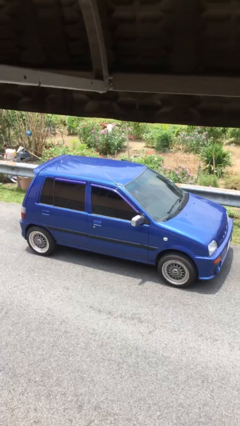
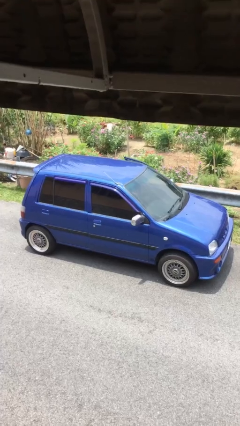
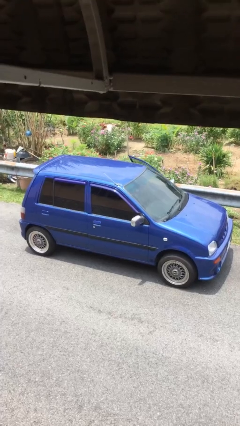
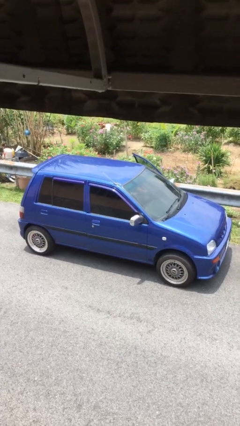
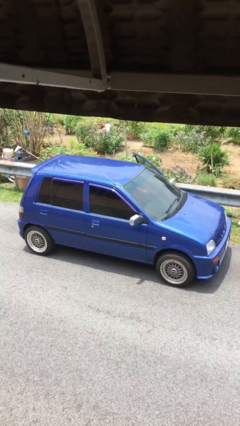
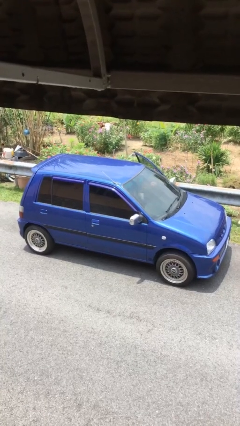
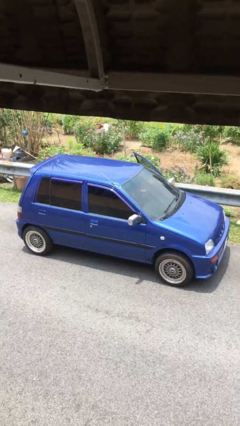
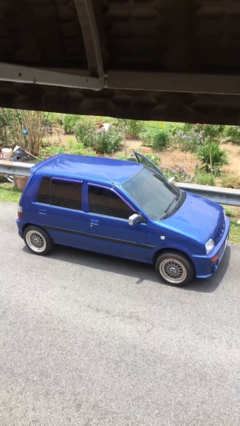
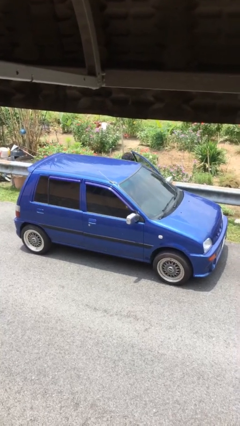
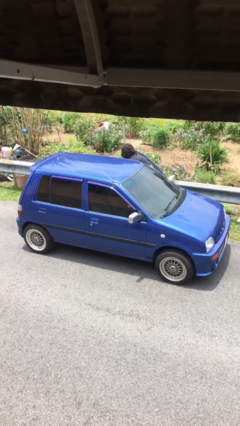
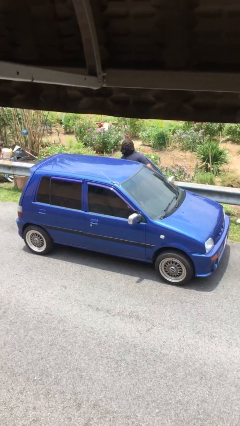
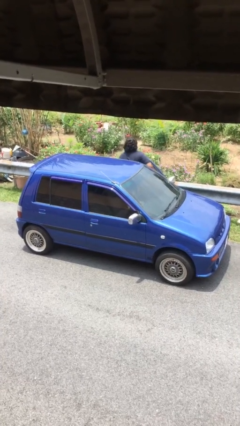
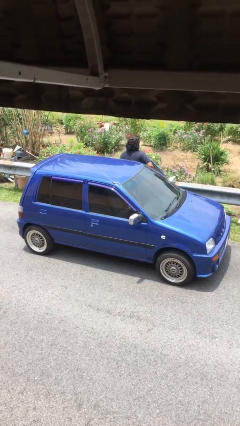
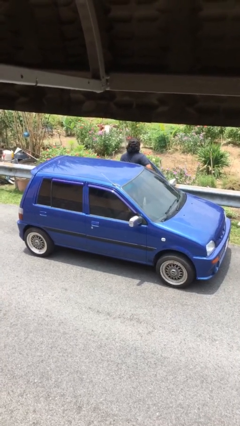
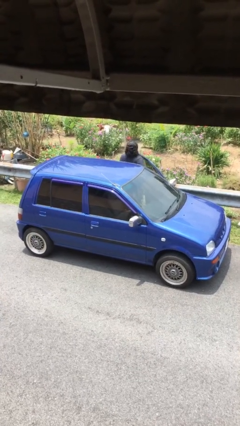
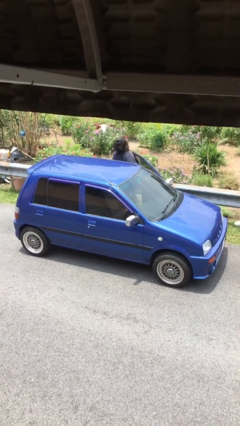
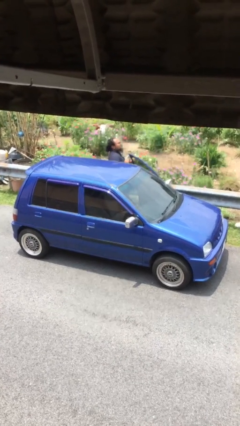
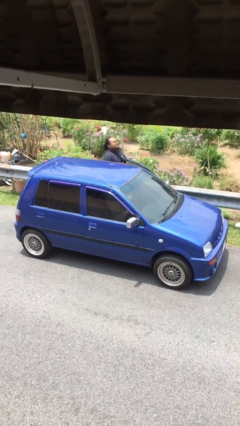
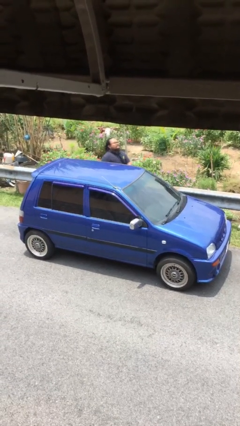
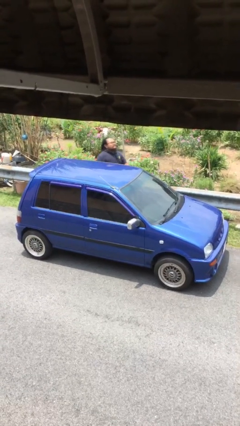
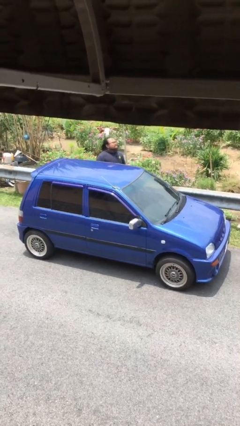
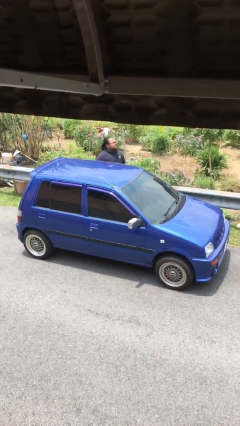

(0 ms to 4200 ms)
car drops off person

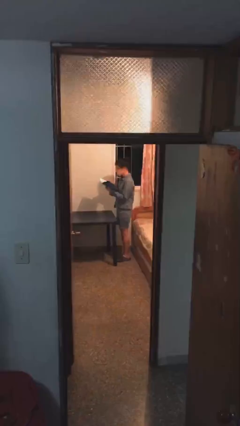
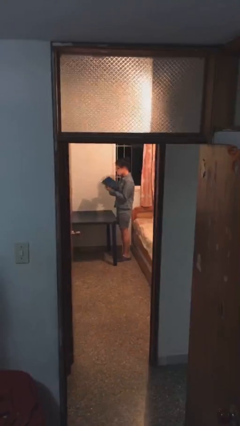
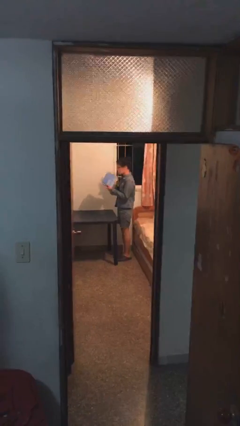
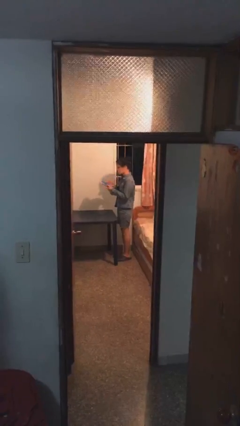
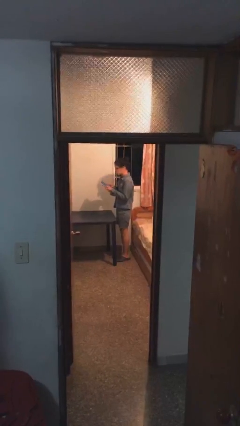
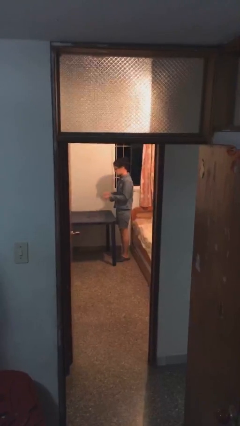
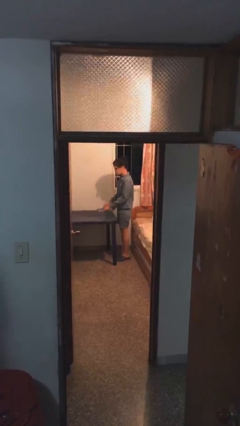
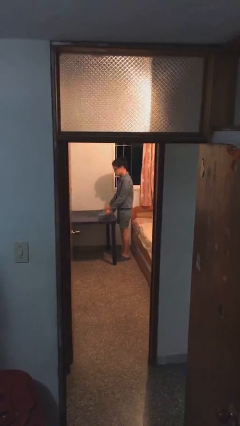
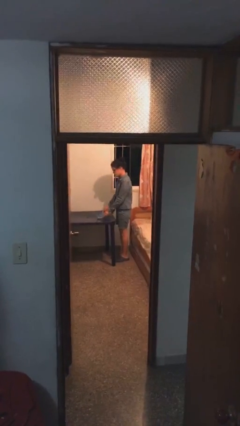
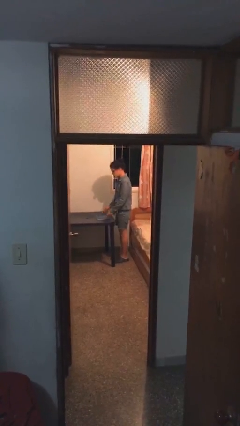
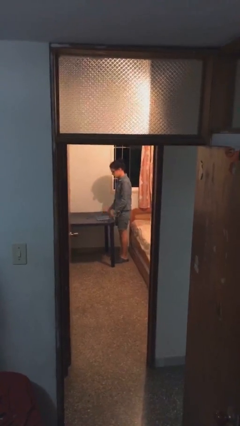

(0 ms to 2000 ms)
person puts down object on table

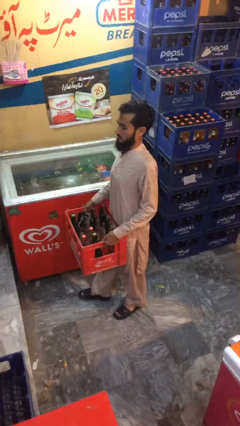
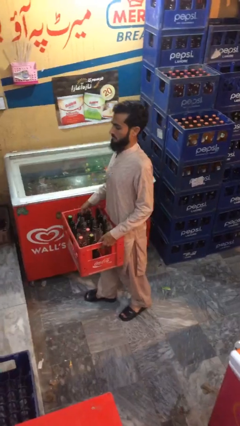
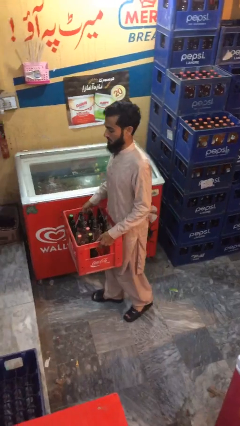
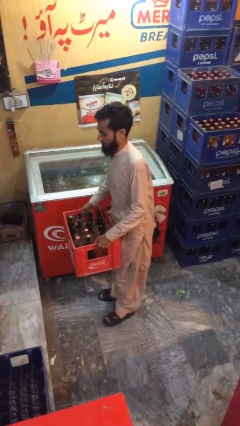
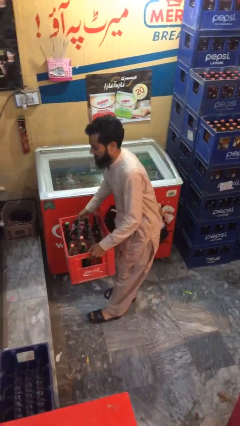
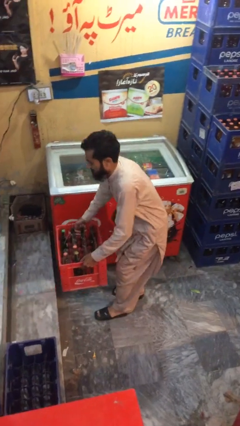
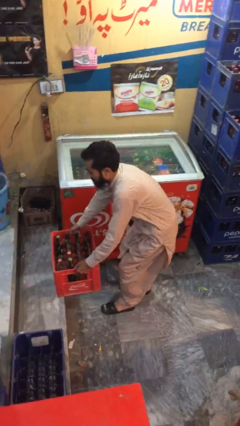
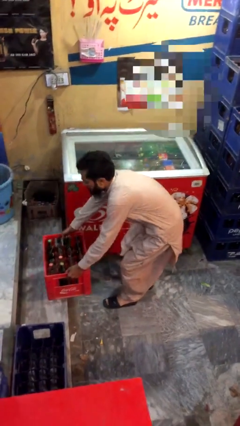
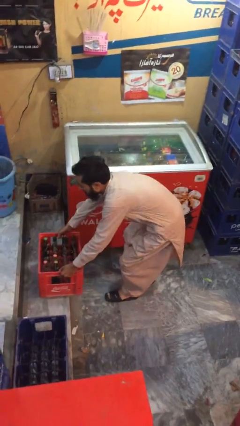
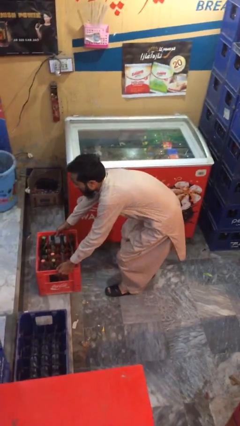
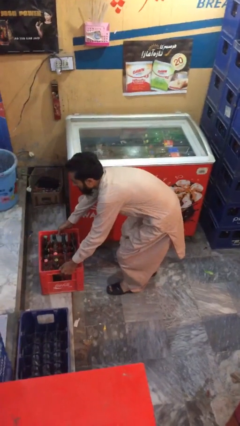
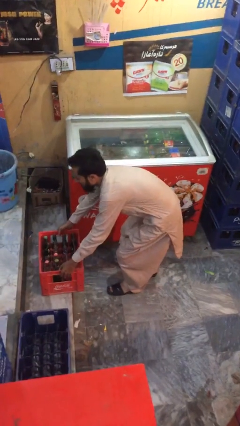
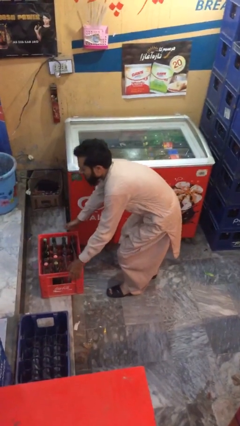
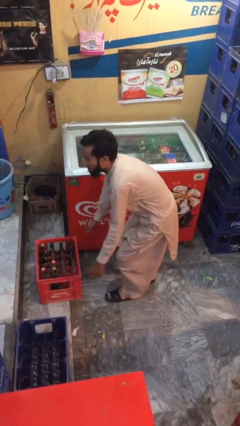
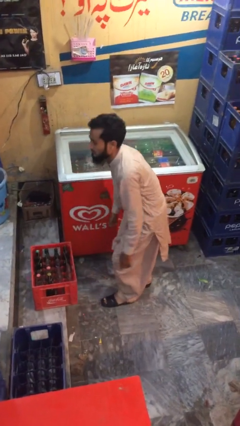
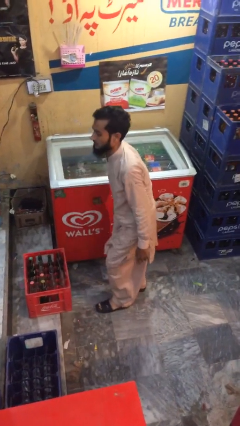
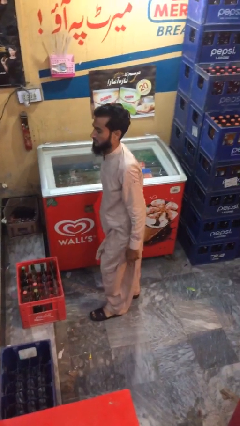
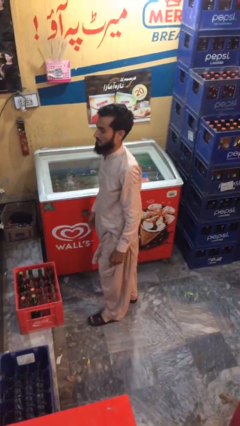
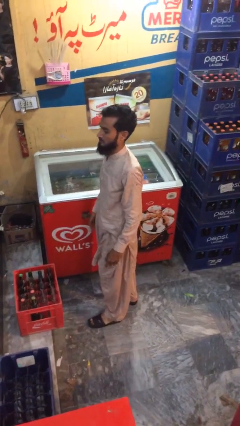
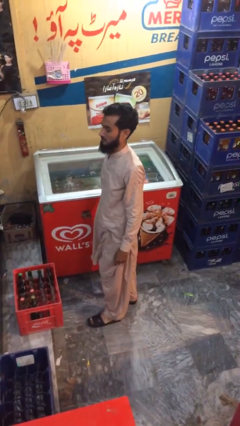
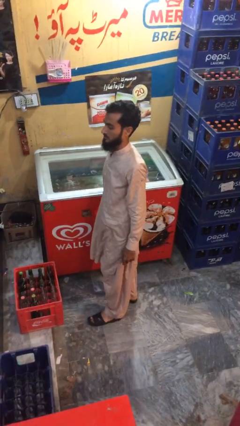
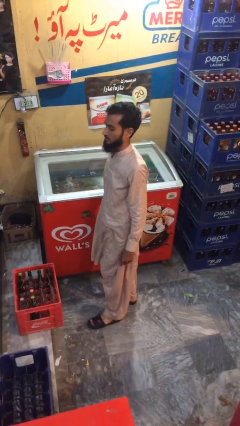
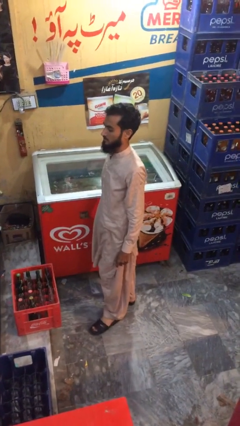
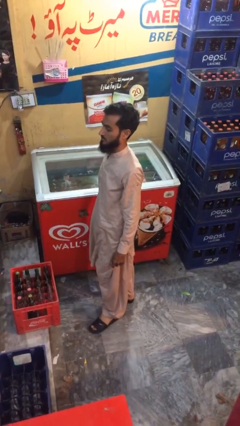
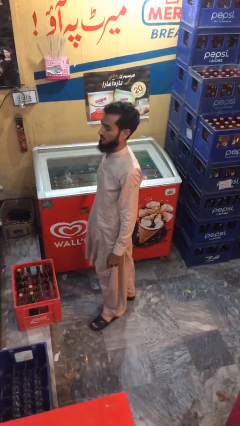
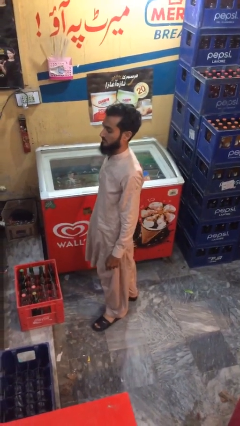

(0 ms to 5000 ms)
person puts down object on floor

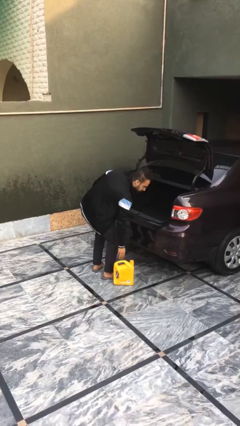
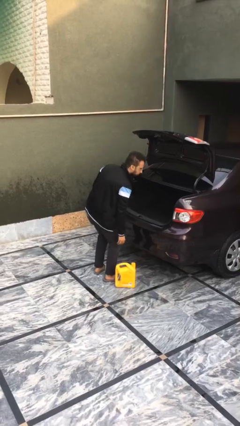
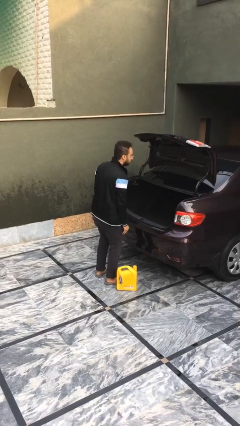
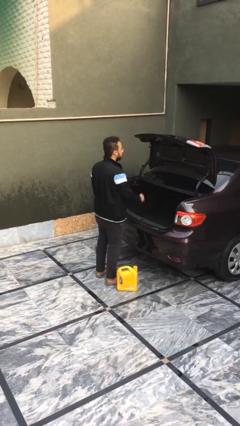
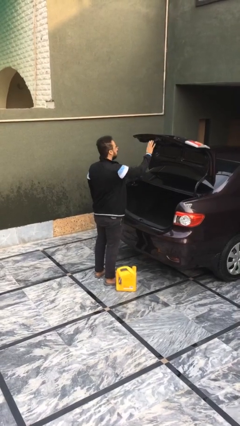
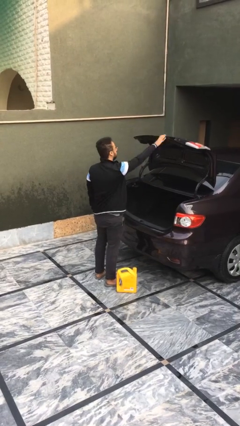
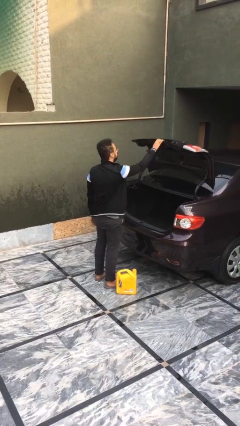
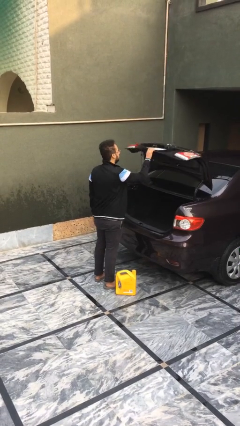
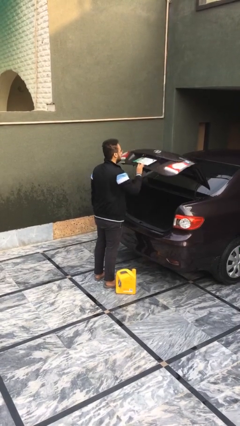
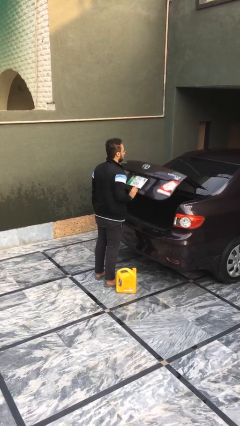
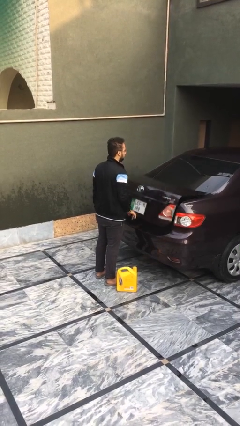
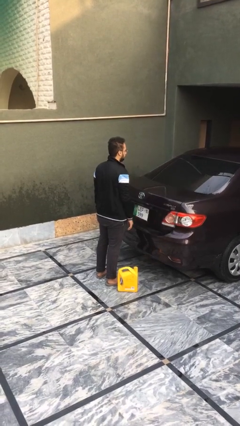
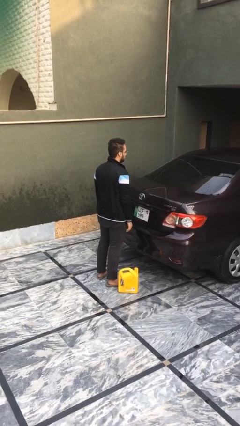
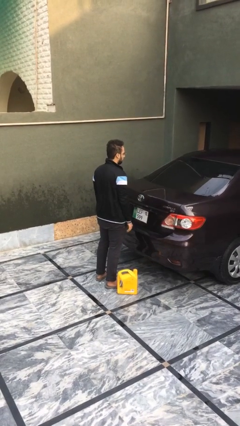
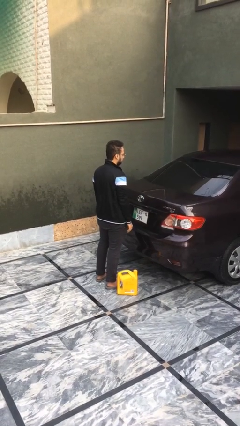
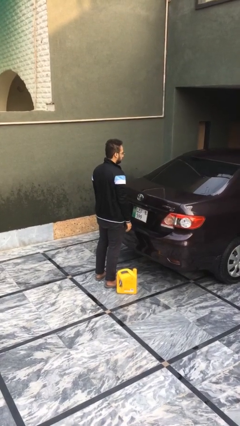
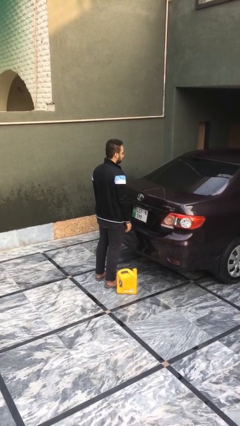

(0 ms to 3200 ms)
person closes car trunk

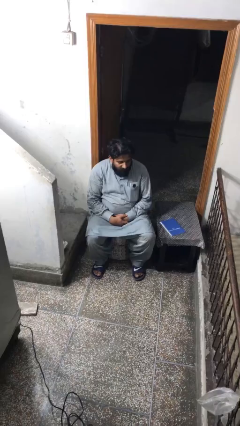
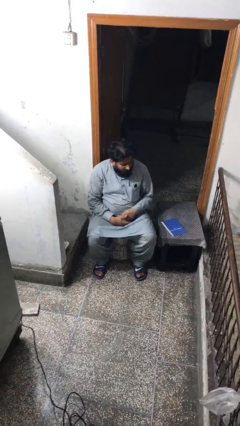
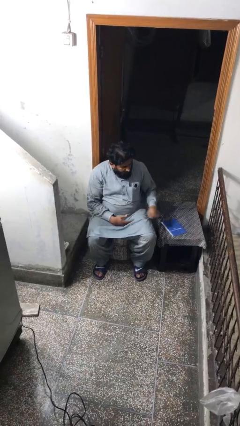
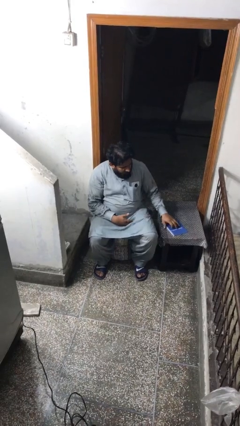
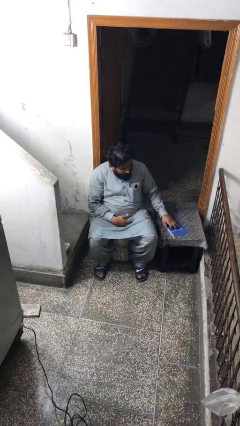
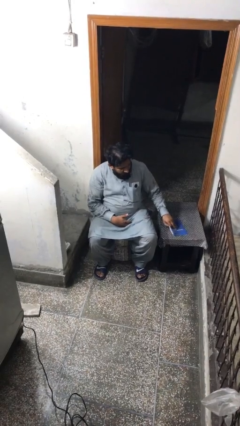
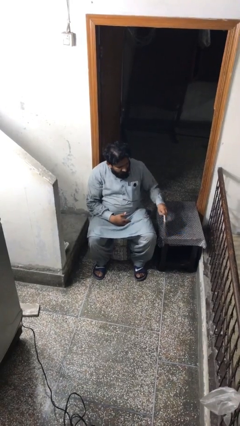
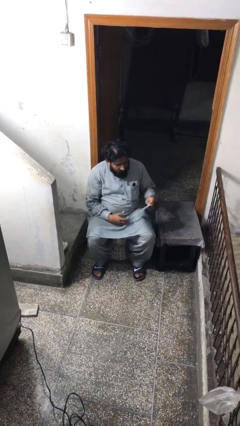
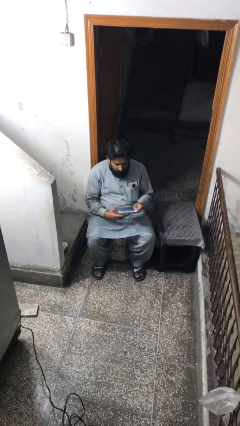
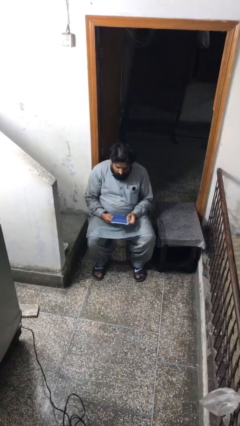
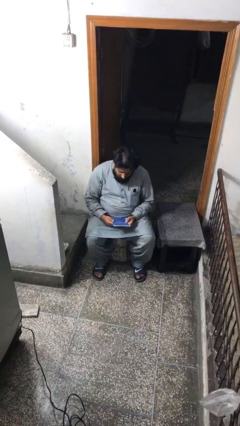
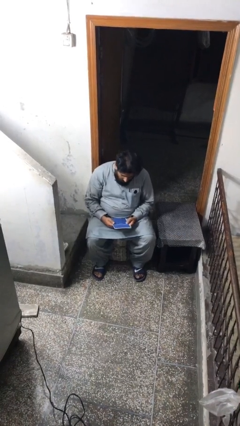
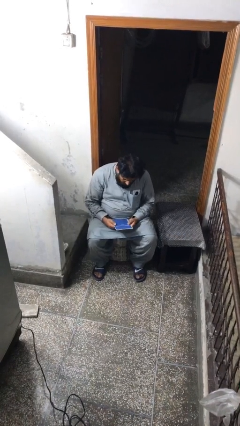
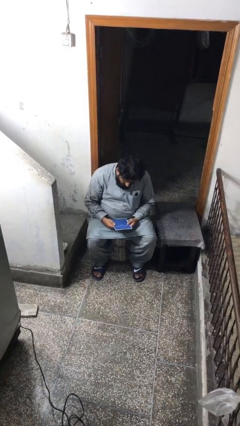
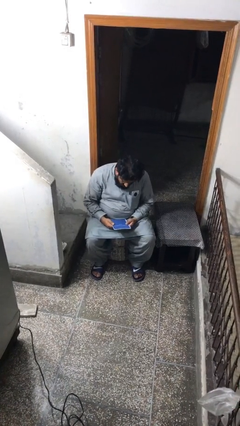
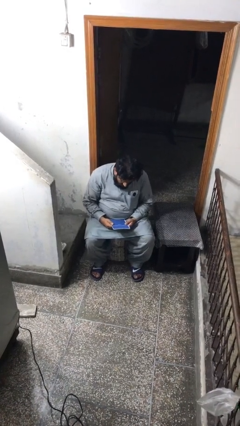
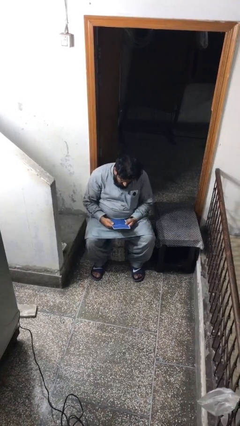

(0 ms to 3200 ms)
person picks up object from table
